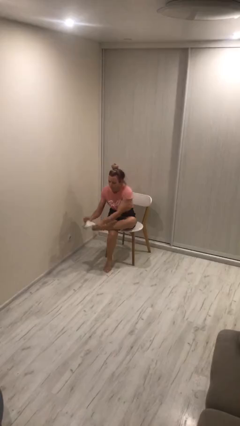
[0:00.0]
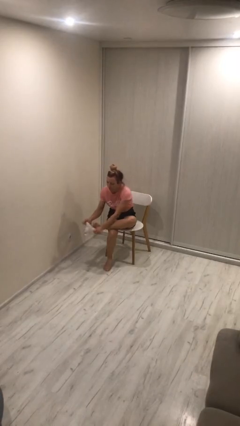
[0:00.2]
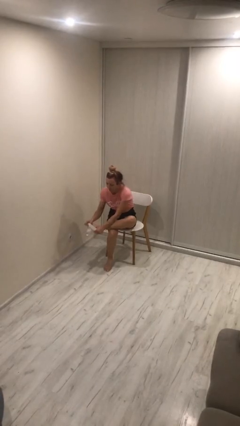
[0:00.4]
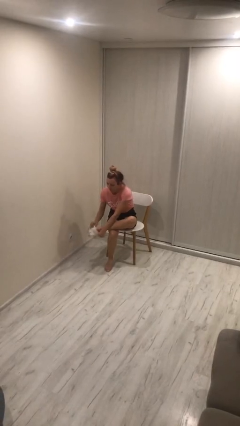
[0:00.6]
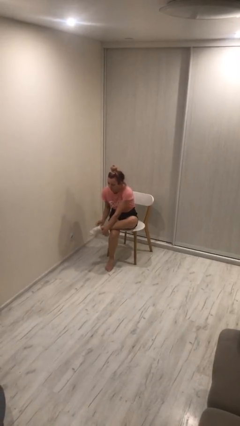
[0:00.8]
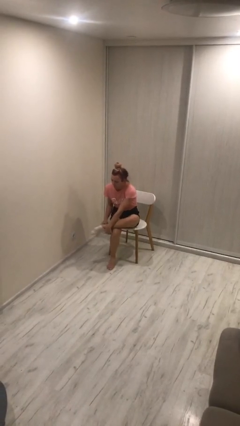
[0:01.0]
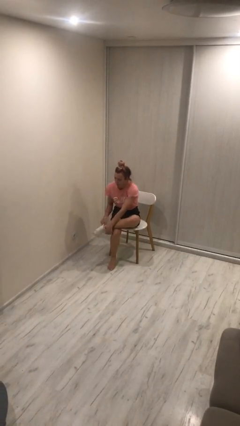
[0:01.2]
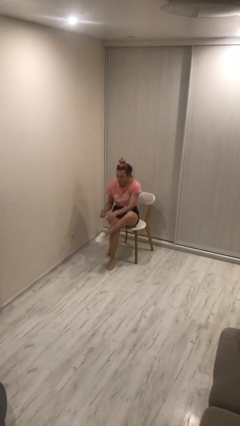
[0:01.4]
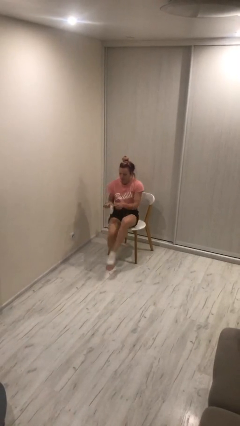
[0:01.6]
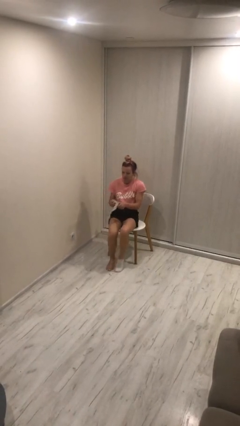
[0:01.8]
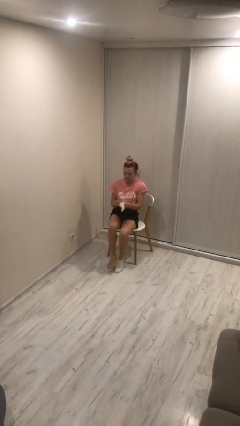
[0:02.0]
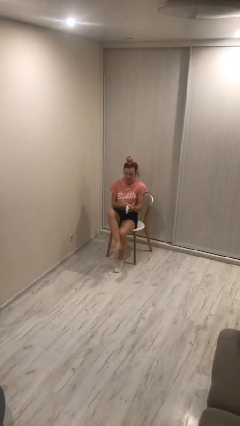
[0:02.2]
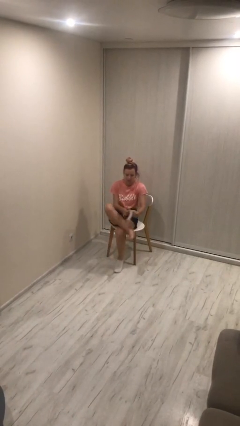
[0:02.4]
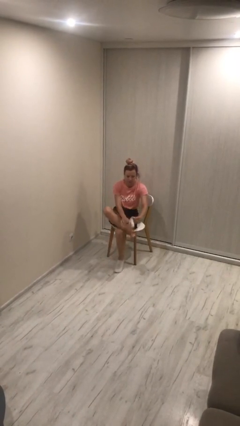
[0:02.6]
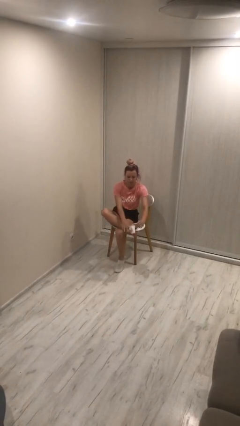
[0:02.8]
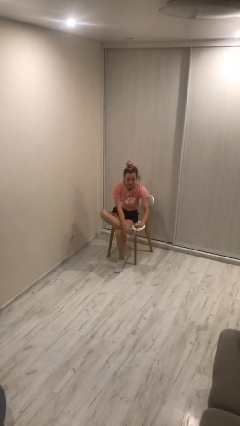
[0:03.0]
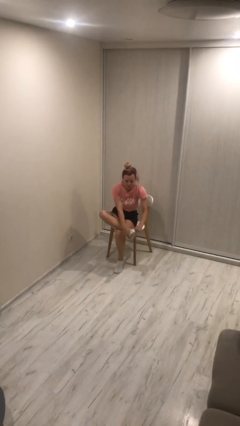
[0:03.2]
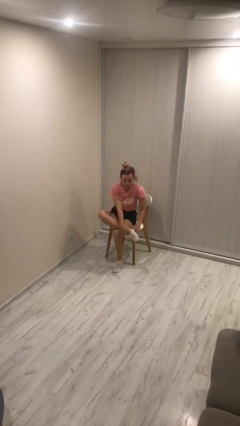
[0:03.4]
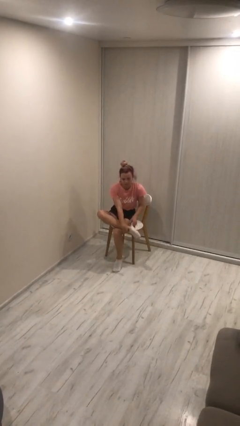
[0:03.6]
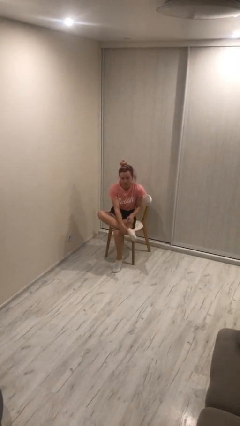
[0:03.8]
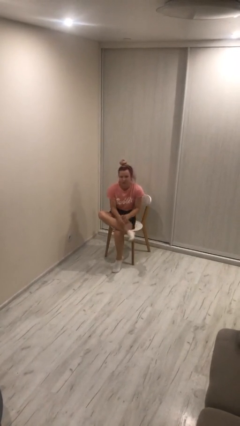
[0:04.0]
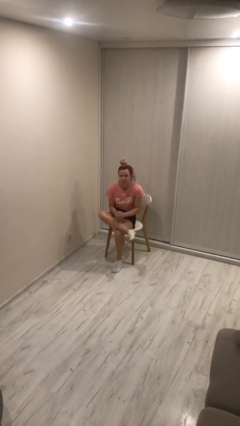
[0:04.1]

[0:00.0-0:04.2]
person puts on socks

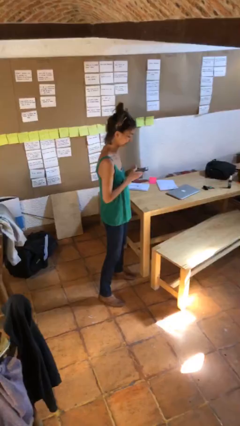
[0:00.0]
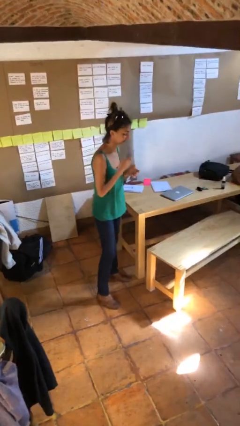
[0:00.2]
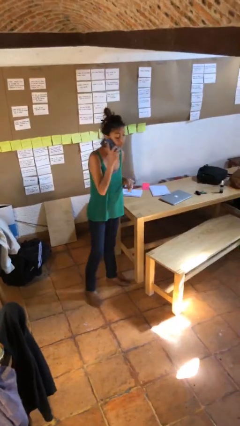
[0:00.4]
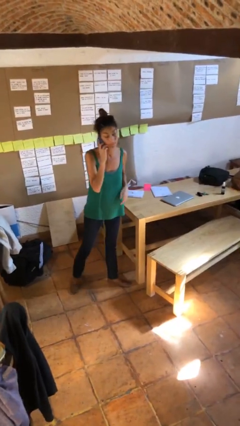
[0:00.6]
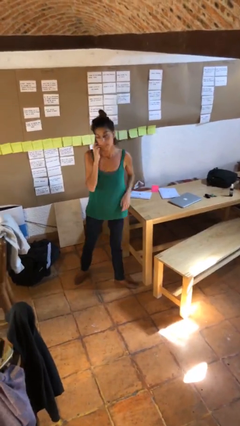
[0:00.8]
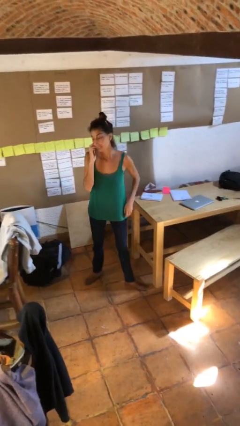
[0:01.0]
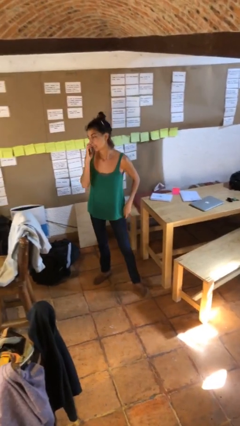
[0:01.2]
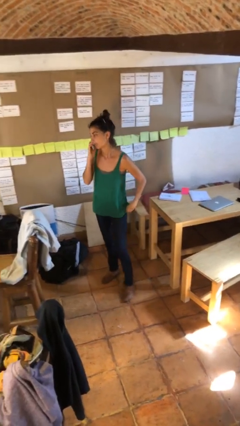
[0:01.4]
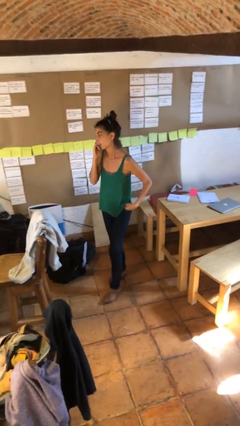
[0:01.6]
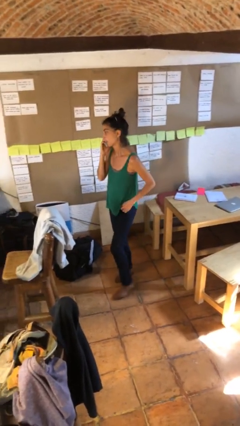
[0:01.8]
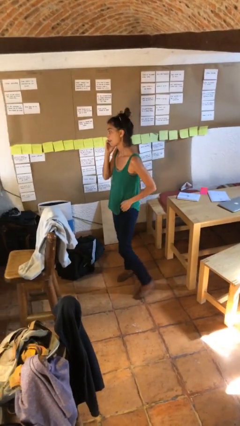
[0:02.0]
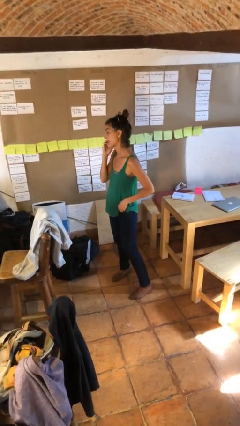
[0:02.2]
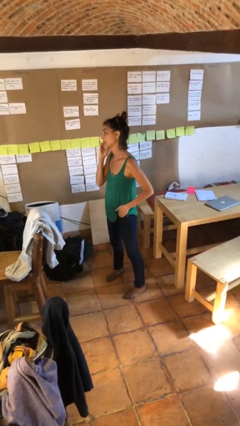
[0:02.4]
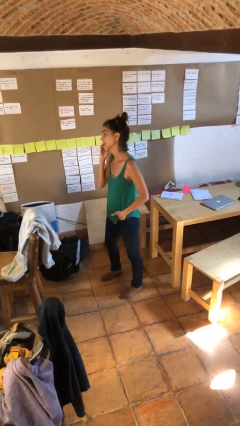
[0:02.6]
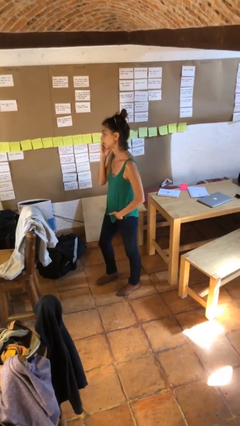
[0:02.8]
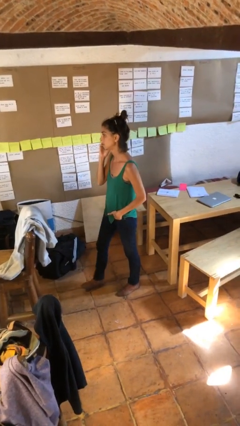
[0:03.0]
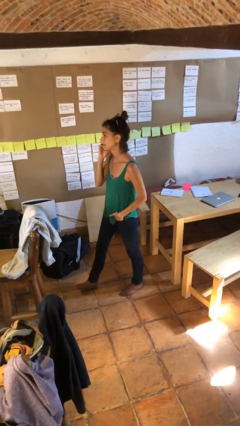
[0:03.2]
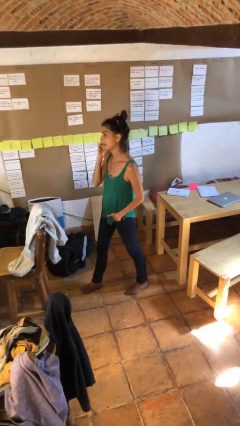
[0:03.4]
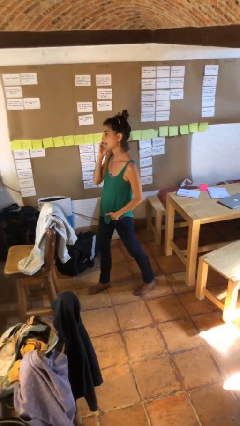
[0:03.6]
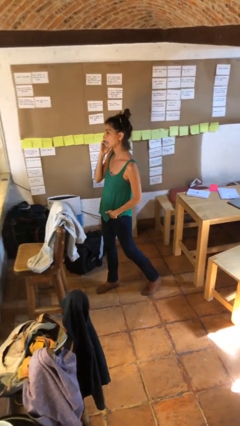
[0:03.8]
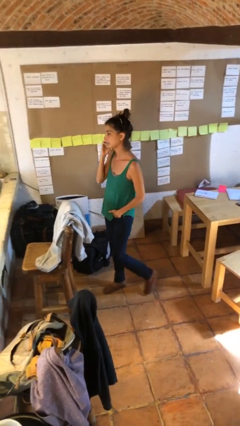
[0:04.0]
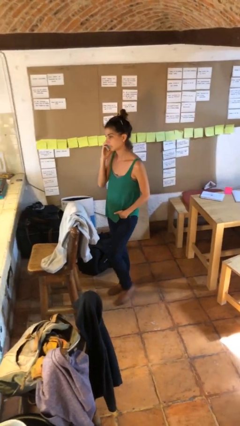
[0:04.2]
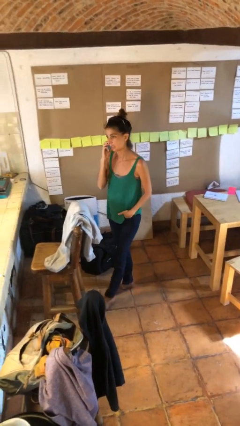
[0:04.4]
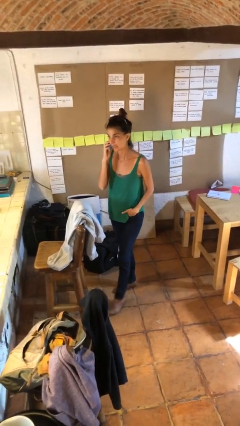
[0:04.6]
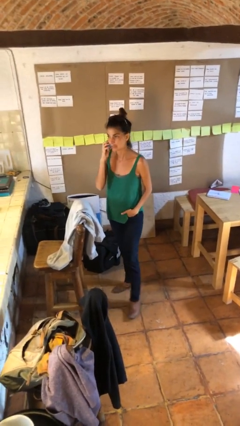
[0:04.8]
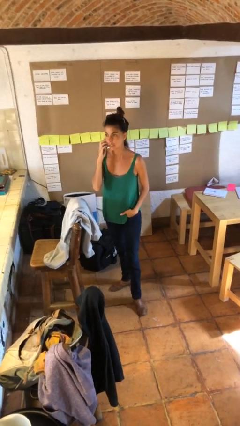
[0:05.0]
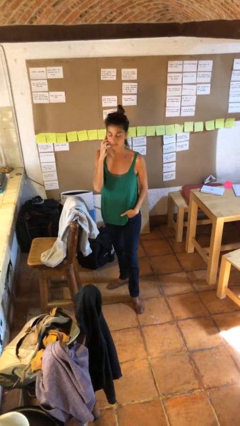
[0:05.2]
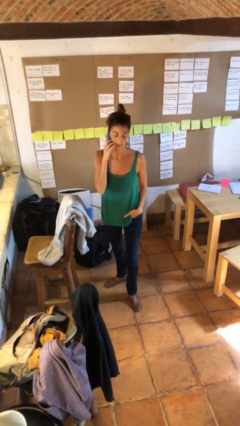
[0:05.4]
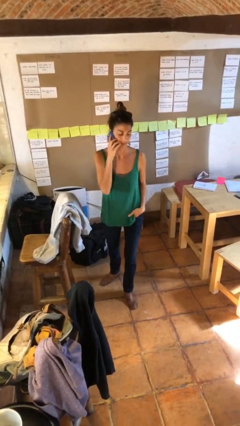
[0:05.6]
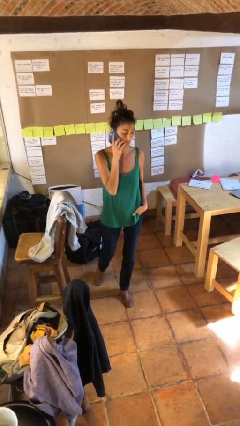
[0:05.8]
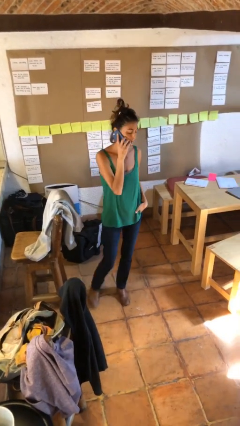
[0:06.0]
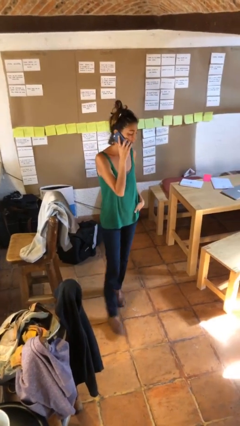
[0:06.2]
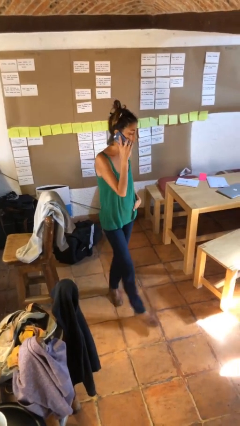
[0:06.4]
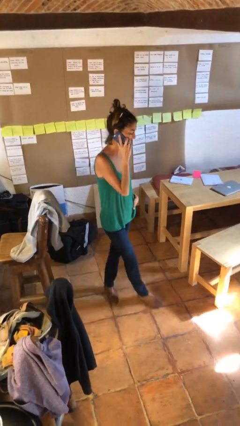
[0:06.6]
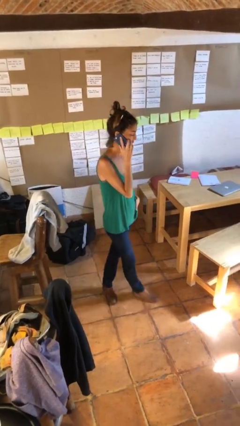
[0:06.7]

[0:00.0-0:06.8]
person talks on phone

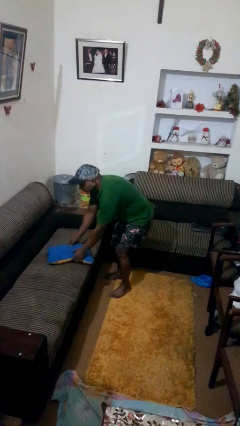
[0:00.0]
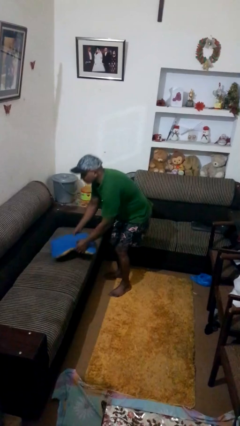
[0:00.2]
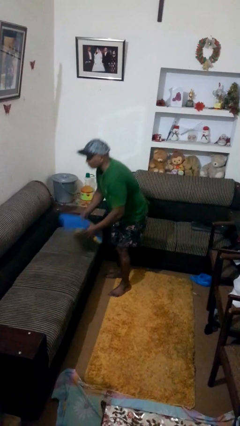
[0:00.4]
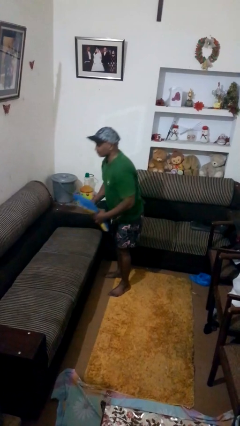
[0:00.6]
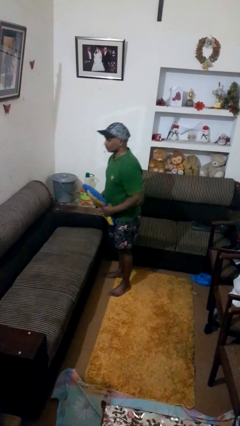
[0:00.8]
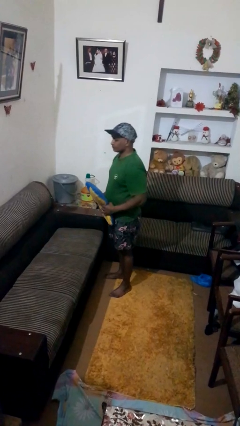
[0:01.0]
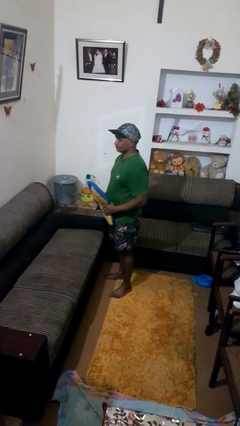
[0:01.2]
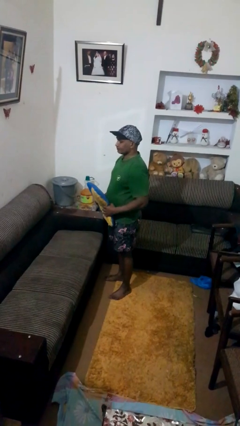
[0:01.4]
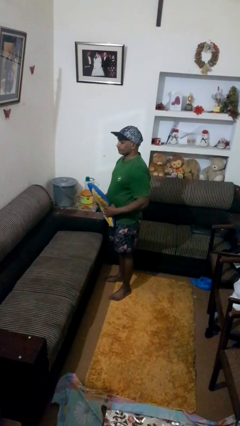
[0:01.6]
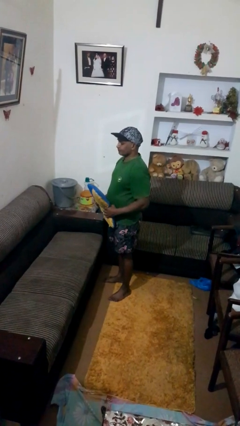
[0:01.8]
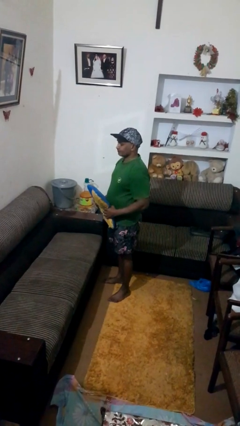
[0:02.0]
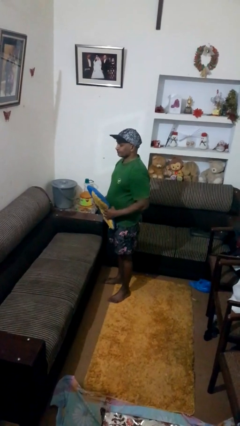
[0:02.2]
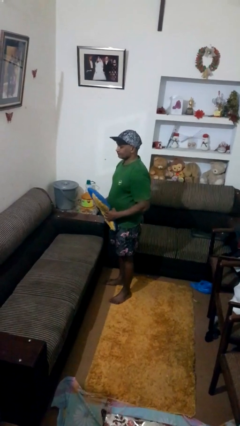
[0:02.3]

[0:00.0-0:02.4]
person picks up object from couch

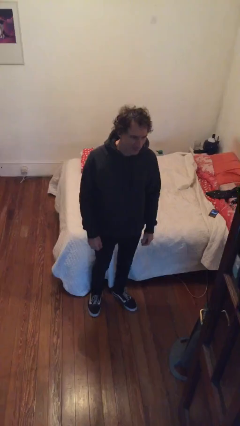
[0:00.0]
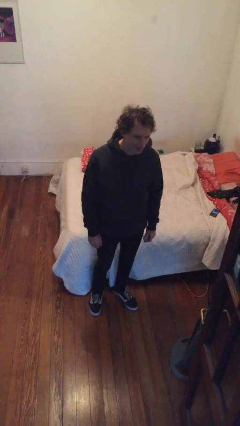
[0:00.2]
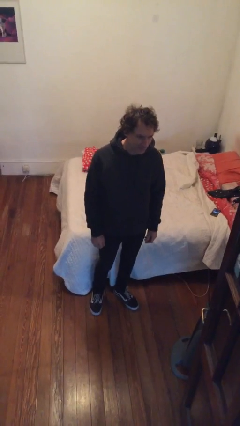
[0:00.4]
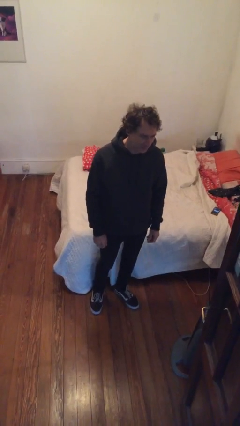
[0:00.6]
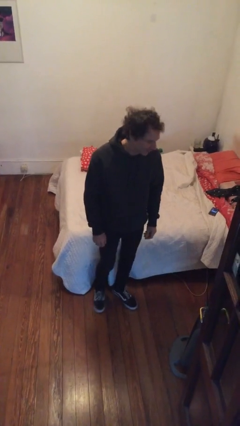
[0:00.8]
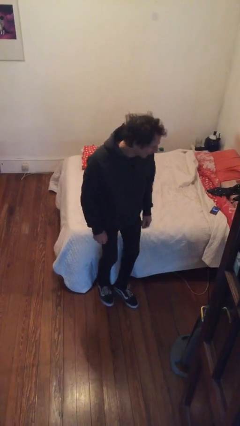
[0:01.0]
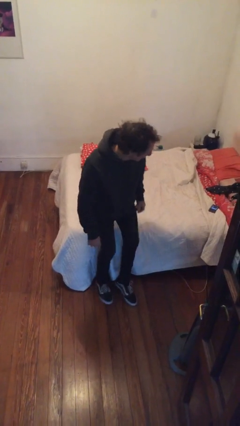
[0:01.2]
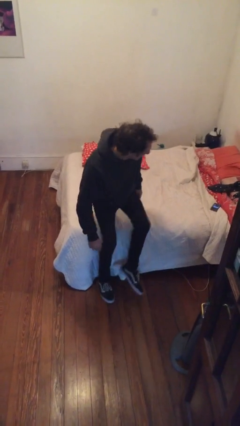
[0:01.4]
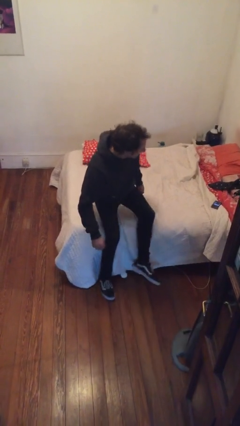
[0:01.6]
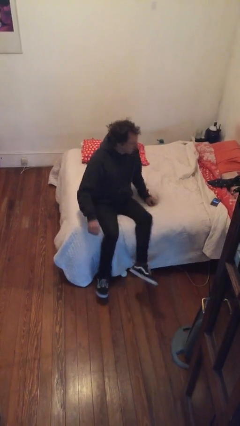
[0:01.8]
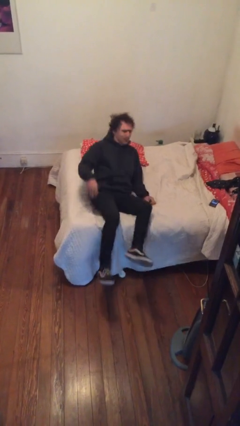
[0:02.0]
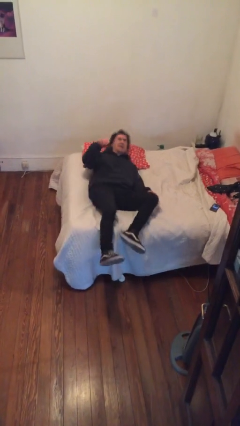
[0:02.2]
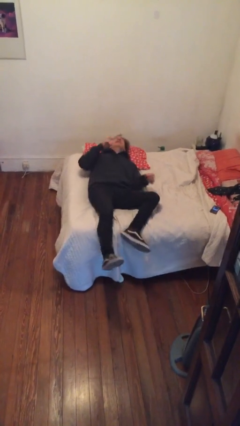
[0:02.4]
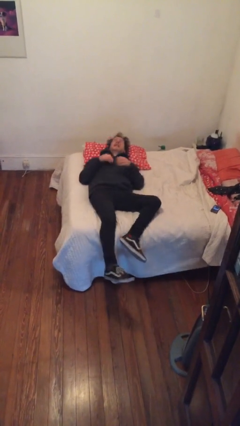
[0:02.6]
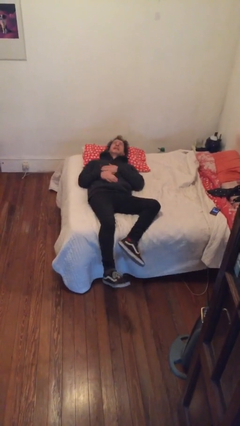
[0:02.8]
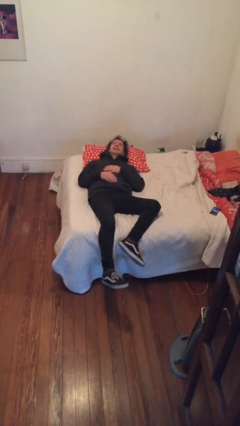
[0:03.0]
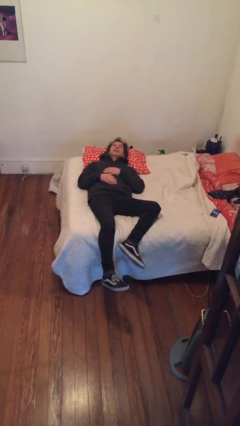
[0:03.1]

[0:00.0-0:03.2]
person lies down on bed

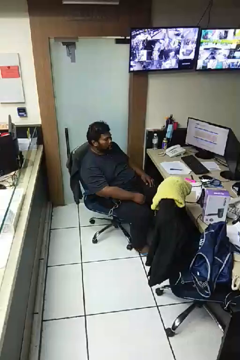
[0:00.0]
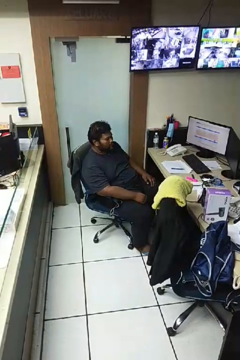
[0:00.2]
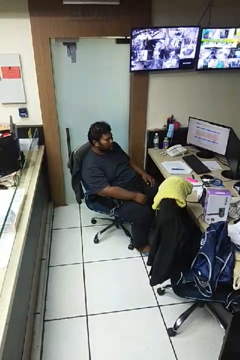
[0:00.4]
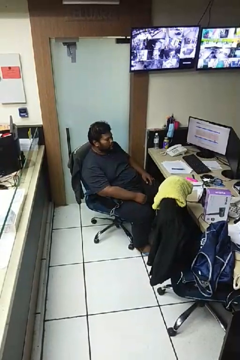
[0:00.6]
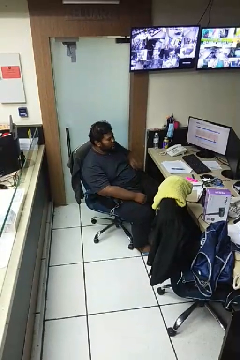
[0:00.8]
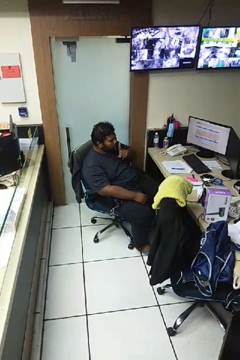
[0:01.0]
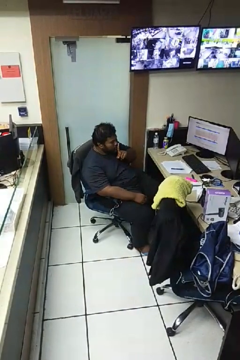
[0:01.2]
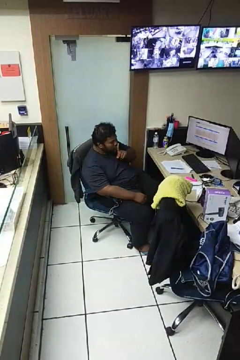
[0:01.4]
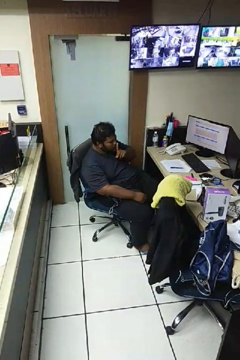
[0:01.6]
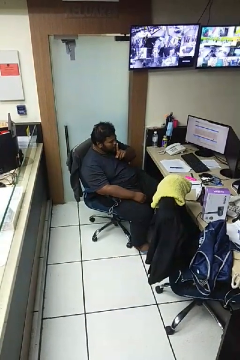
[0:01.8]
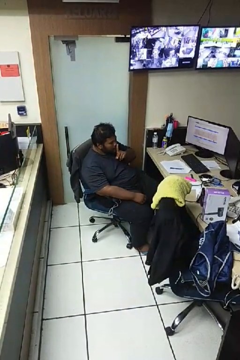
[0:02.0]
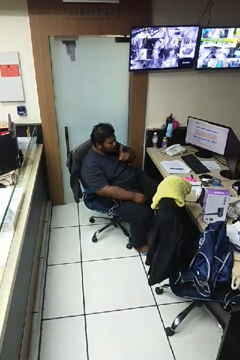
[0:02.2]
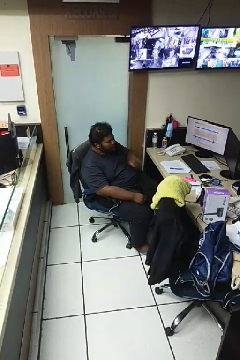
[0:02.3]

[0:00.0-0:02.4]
person gestures be quiet
